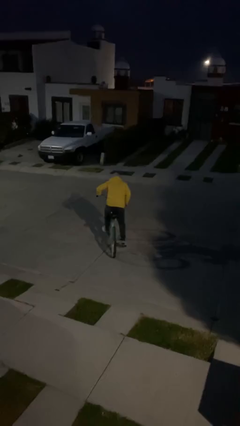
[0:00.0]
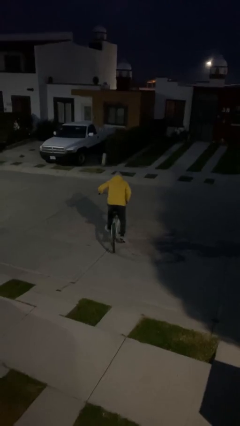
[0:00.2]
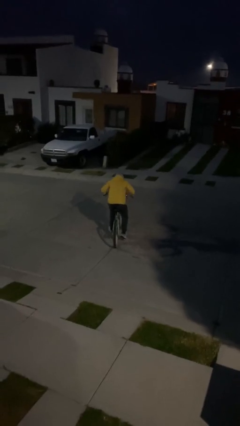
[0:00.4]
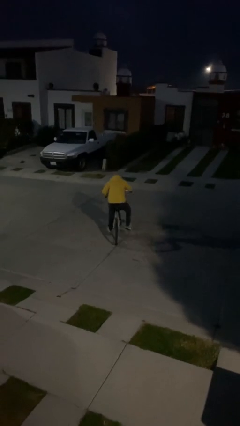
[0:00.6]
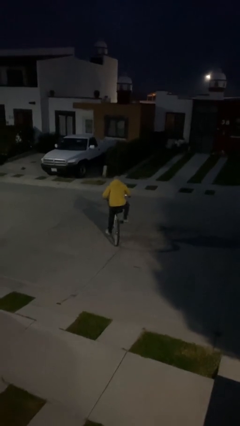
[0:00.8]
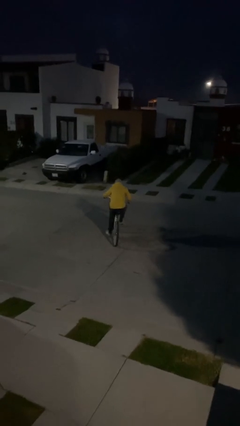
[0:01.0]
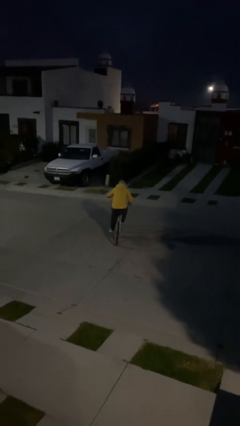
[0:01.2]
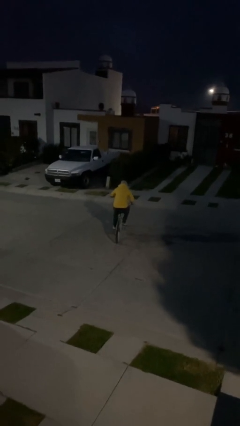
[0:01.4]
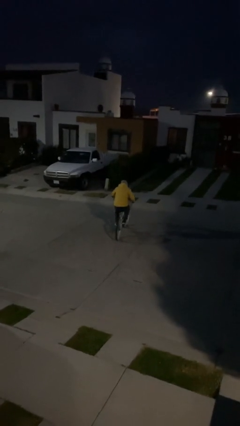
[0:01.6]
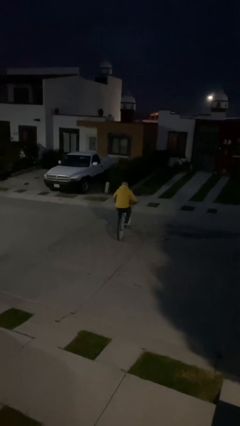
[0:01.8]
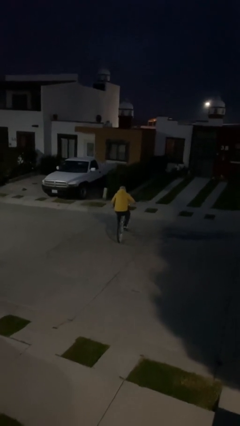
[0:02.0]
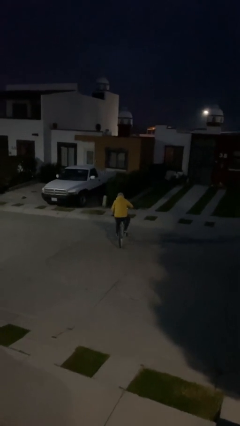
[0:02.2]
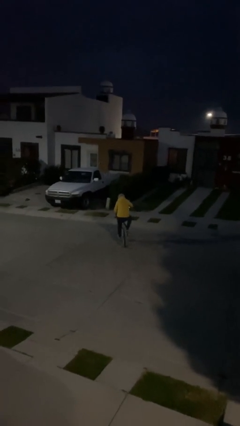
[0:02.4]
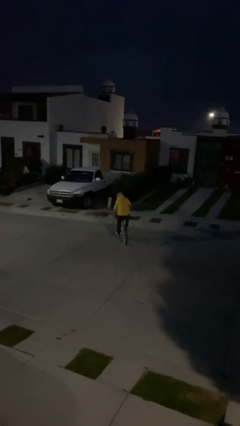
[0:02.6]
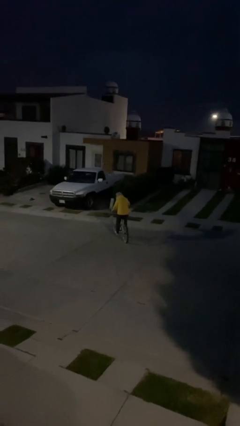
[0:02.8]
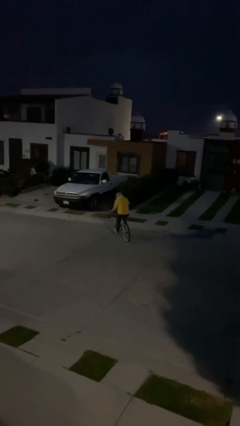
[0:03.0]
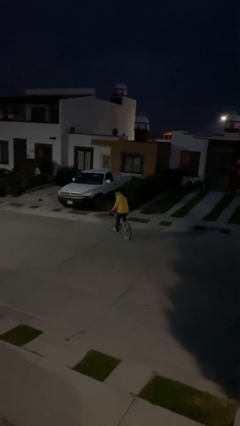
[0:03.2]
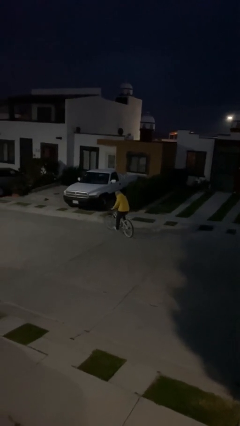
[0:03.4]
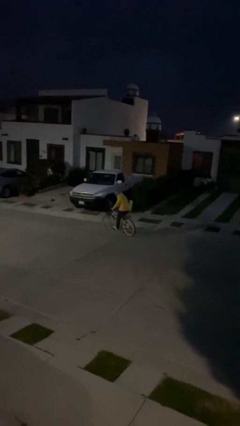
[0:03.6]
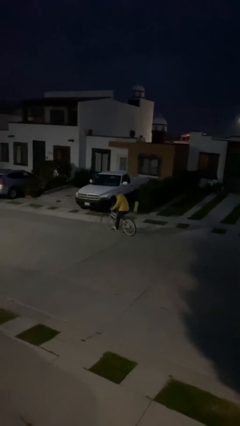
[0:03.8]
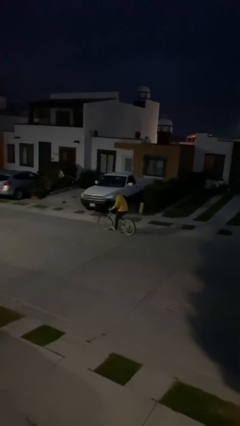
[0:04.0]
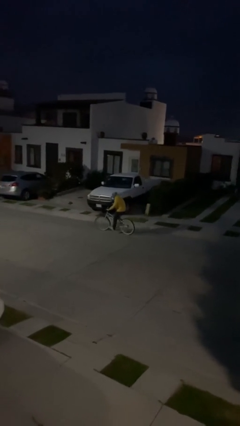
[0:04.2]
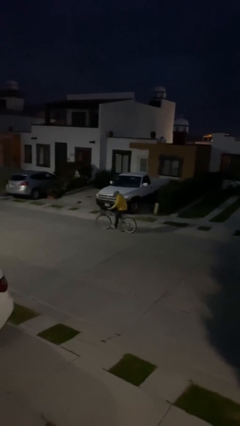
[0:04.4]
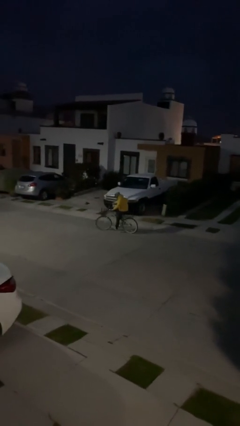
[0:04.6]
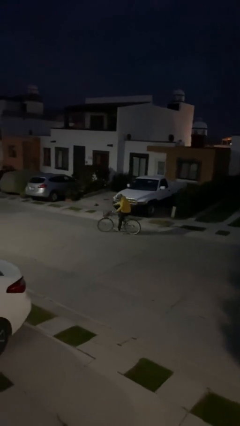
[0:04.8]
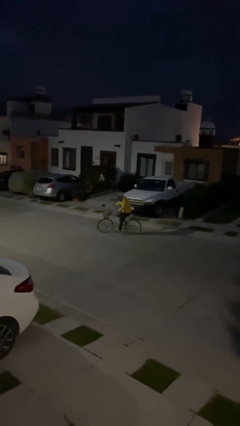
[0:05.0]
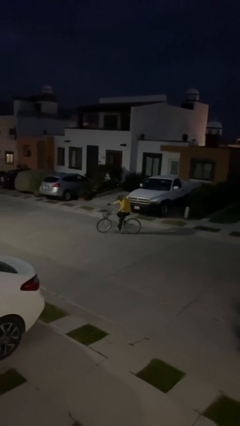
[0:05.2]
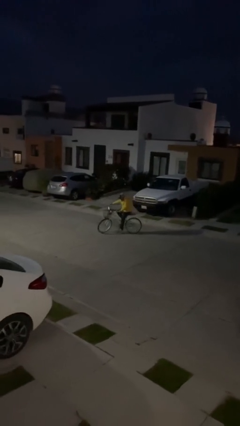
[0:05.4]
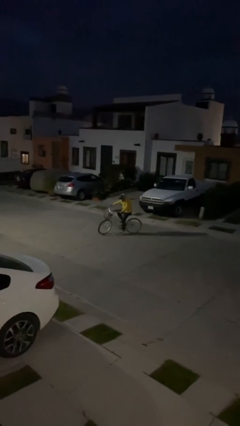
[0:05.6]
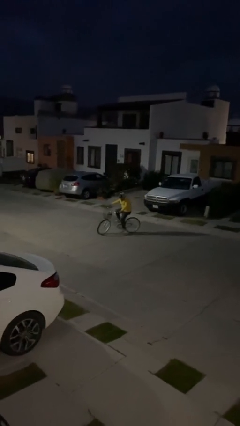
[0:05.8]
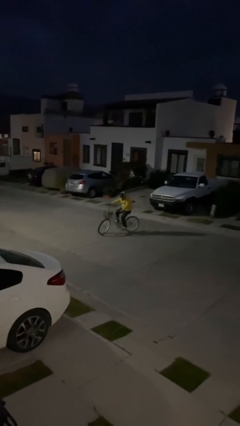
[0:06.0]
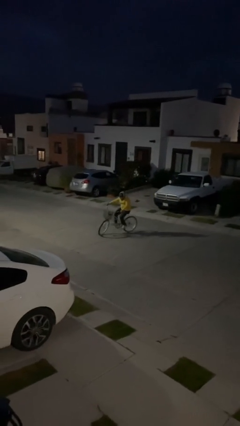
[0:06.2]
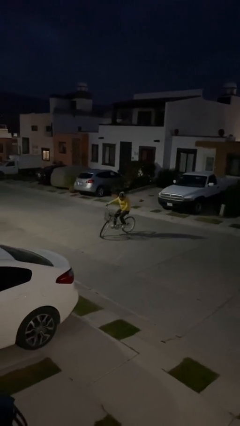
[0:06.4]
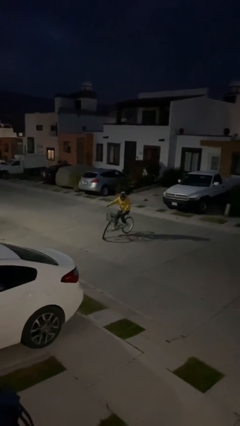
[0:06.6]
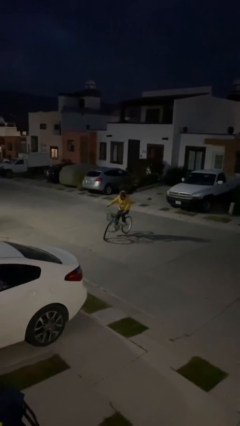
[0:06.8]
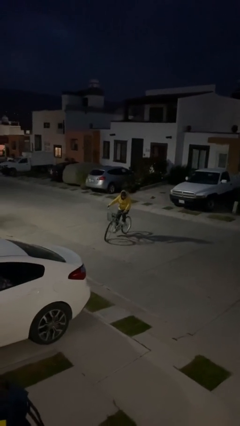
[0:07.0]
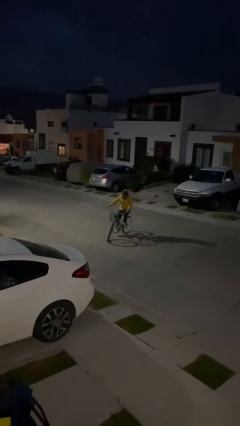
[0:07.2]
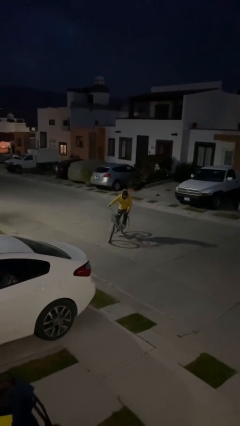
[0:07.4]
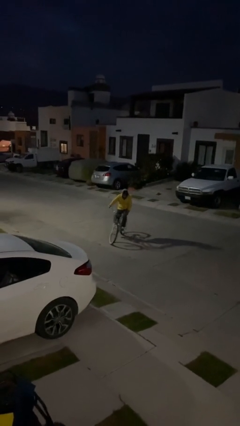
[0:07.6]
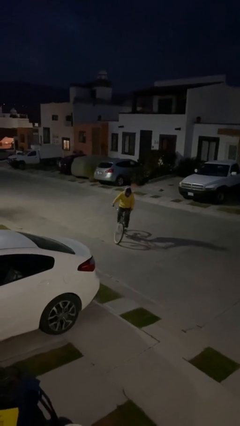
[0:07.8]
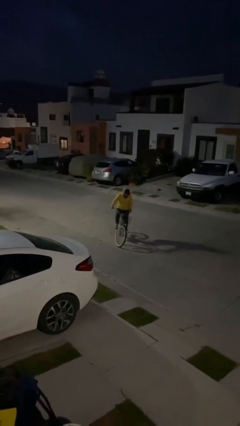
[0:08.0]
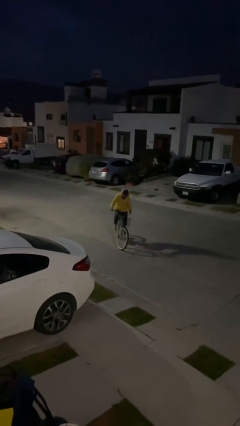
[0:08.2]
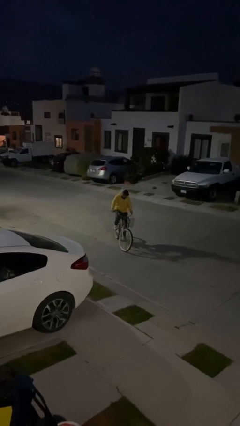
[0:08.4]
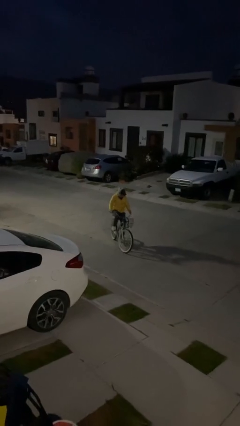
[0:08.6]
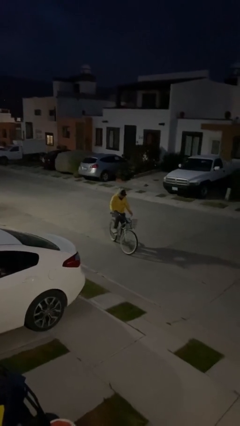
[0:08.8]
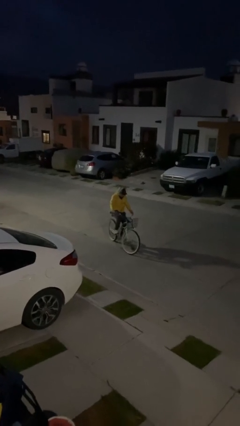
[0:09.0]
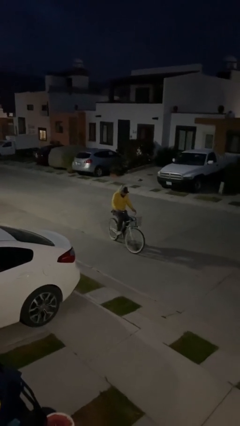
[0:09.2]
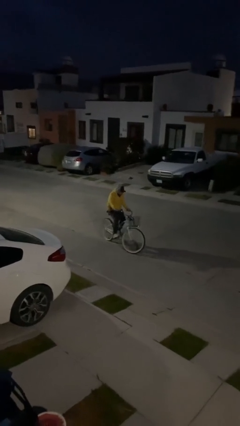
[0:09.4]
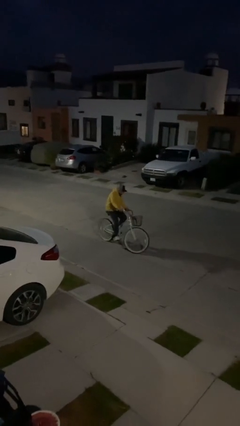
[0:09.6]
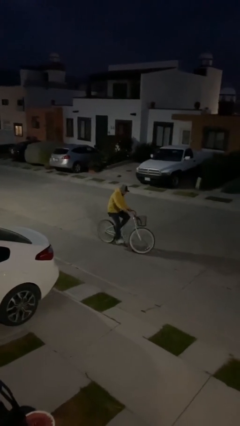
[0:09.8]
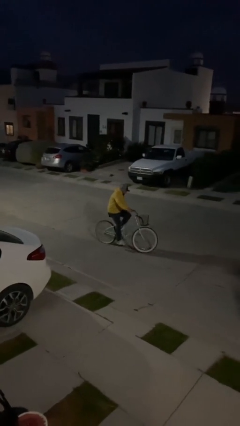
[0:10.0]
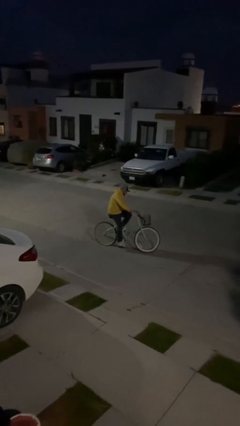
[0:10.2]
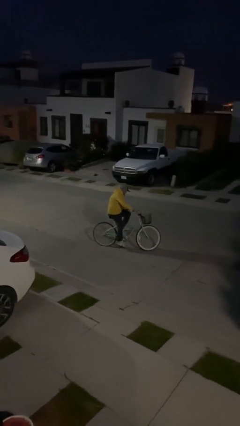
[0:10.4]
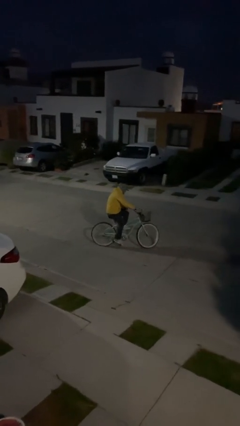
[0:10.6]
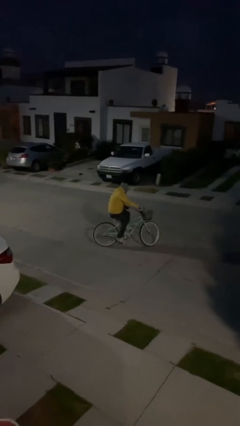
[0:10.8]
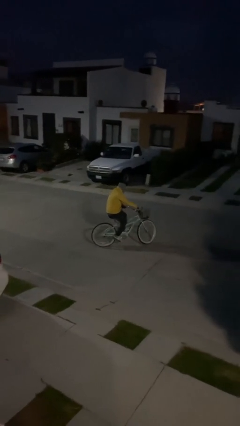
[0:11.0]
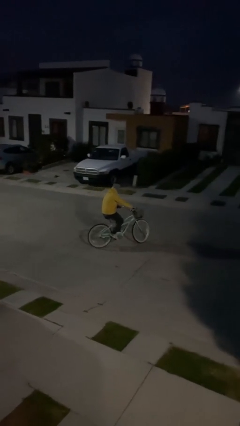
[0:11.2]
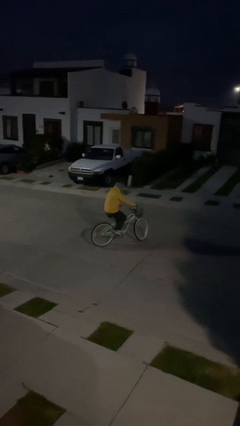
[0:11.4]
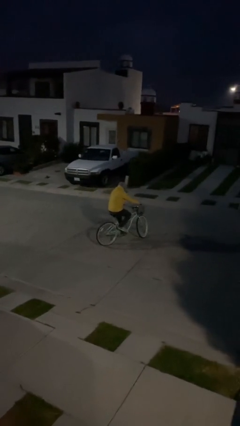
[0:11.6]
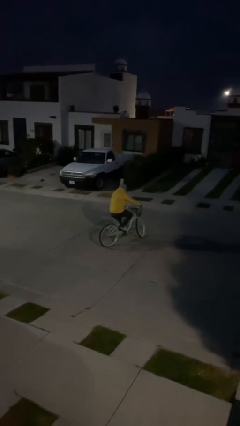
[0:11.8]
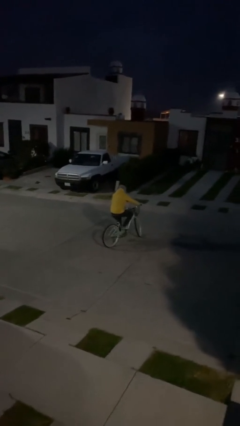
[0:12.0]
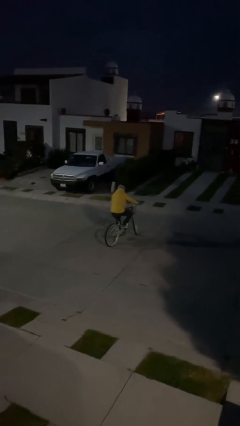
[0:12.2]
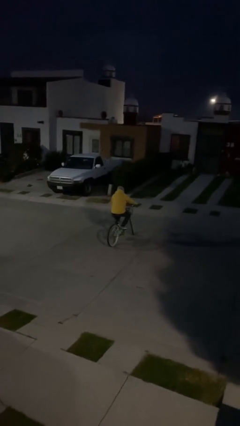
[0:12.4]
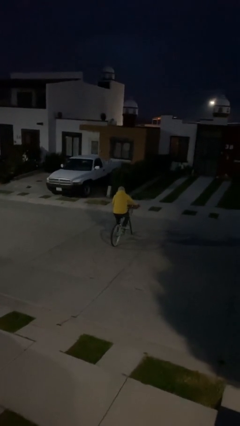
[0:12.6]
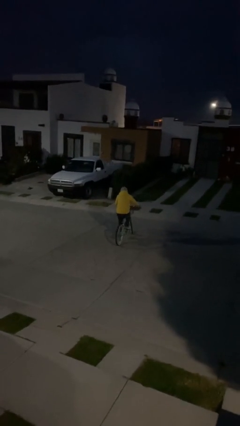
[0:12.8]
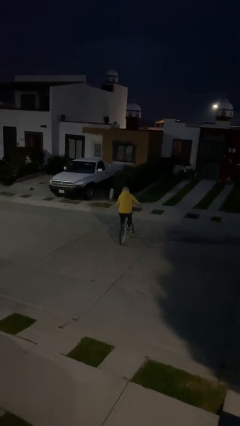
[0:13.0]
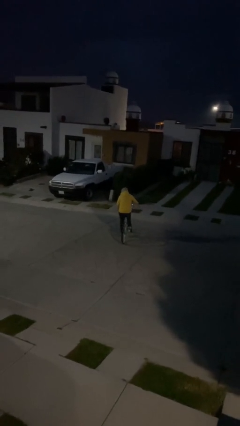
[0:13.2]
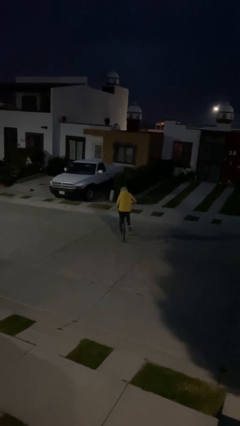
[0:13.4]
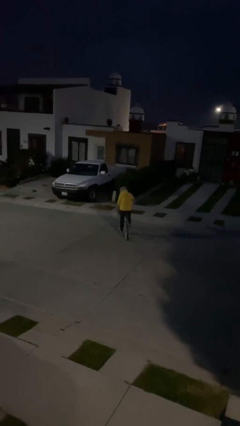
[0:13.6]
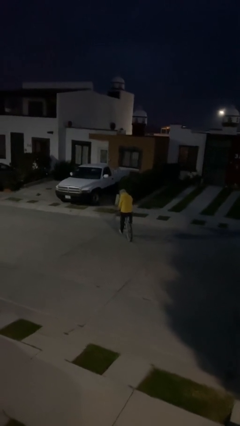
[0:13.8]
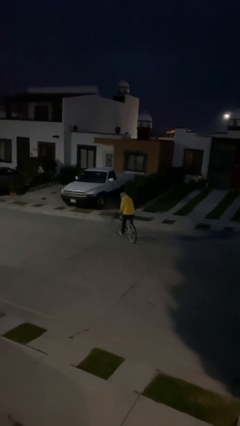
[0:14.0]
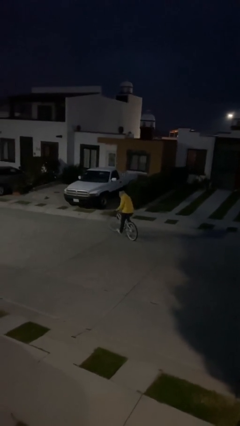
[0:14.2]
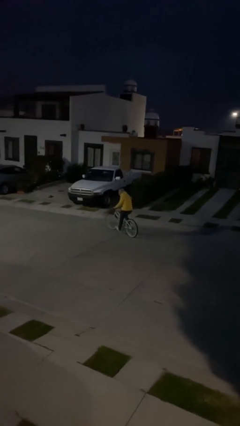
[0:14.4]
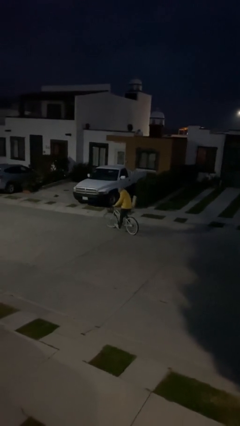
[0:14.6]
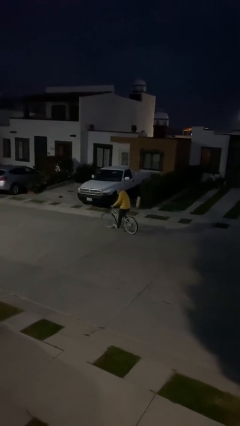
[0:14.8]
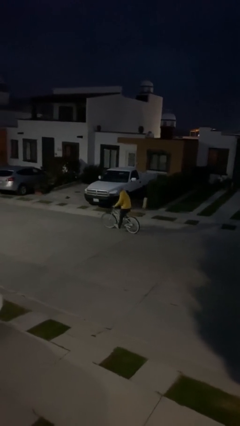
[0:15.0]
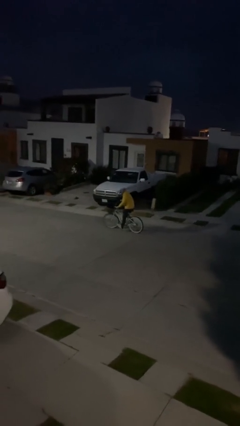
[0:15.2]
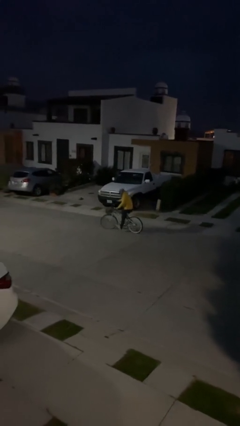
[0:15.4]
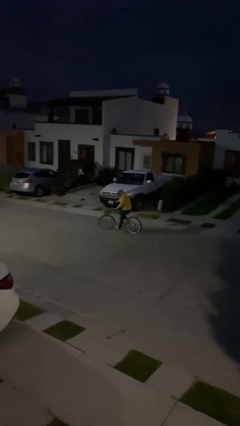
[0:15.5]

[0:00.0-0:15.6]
person rides bicycle

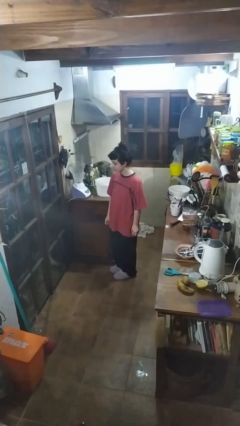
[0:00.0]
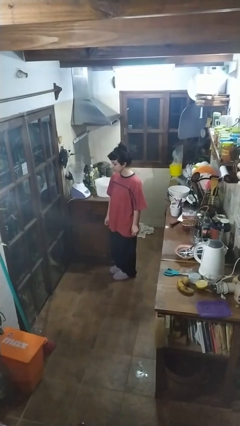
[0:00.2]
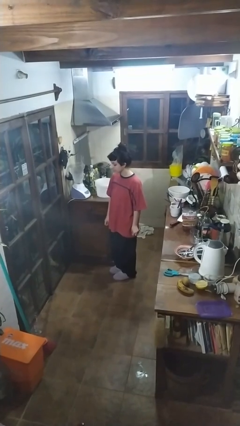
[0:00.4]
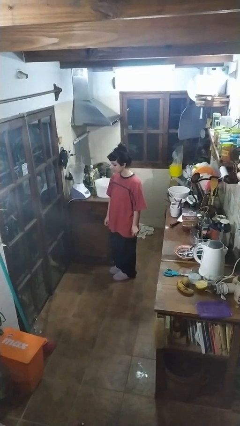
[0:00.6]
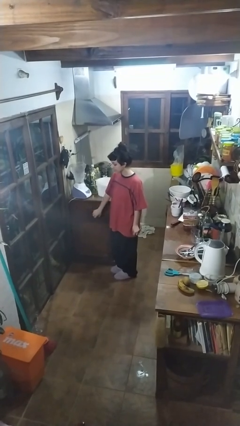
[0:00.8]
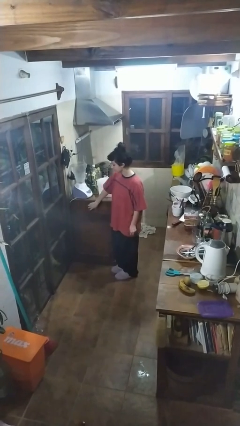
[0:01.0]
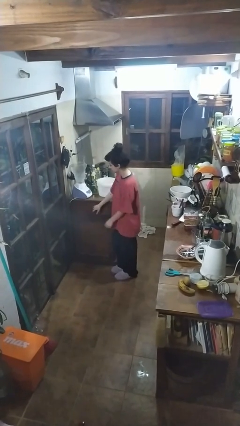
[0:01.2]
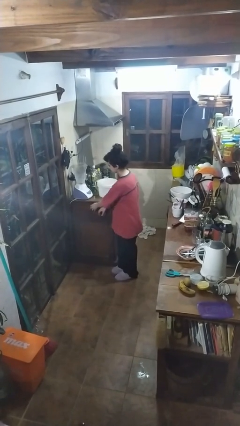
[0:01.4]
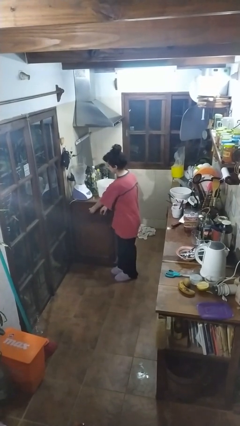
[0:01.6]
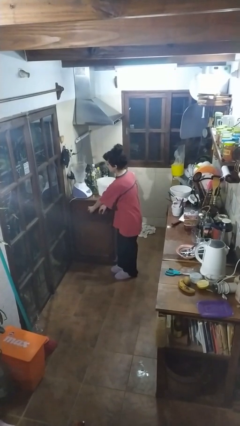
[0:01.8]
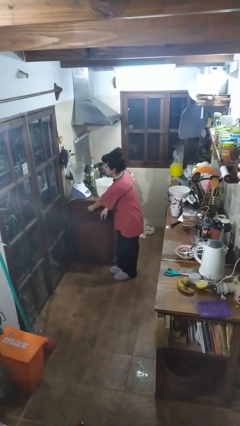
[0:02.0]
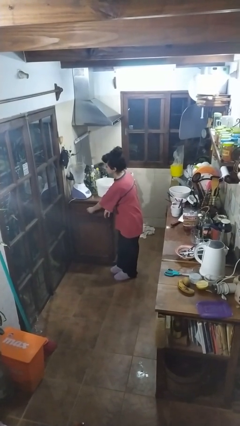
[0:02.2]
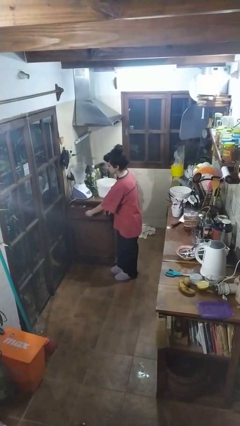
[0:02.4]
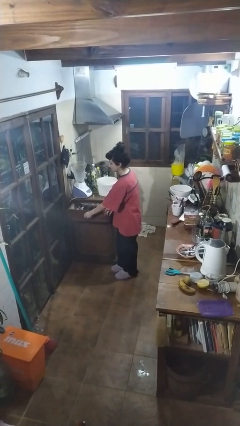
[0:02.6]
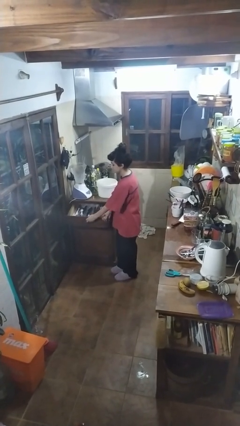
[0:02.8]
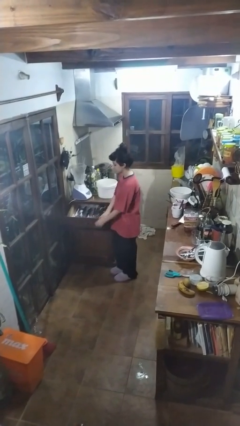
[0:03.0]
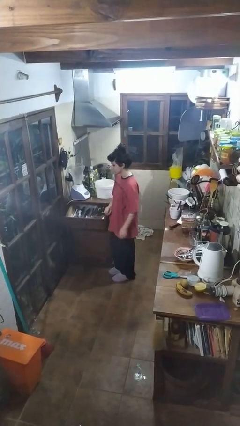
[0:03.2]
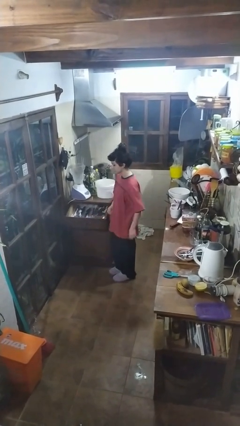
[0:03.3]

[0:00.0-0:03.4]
person opens kitchen drawer
